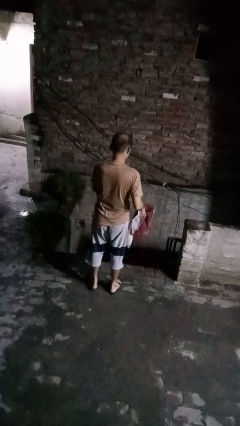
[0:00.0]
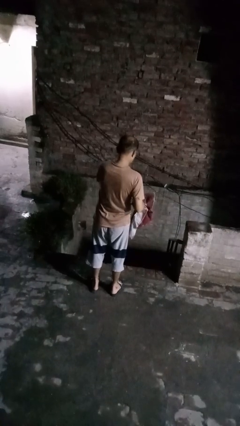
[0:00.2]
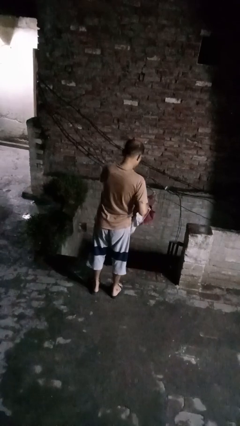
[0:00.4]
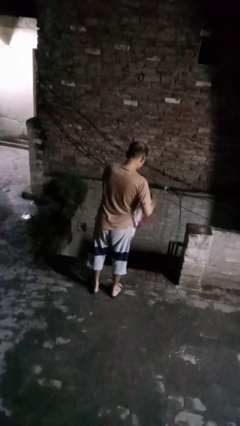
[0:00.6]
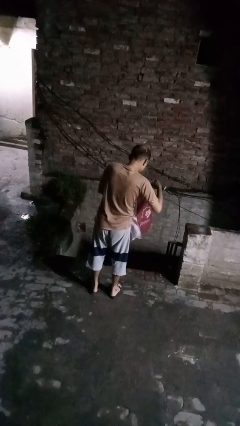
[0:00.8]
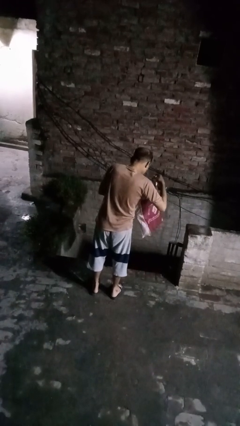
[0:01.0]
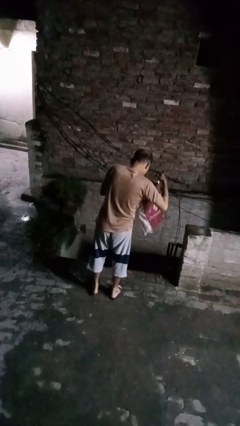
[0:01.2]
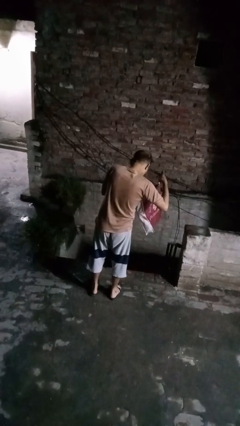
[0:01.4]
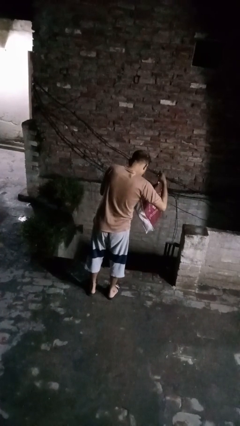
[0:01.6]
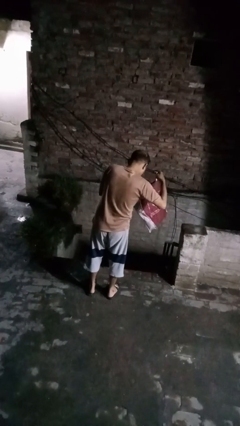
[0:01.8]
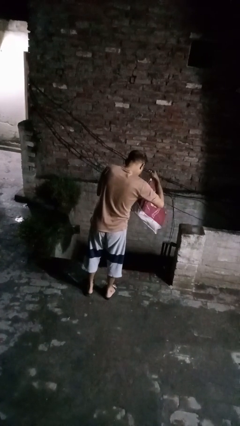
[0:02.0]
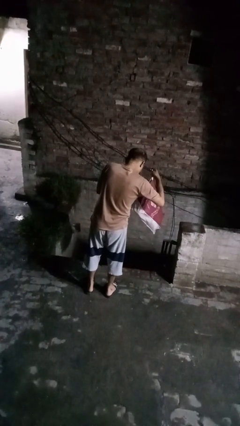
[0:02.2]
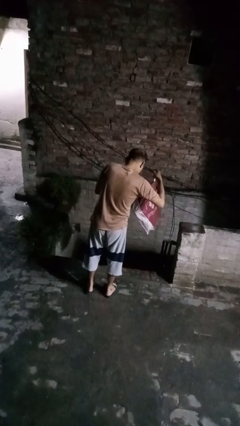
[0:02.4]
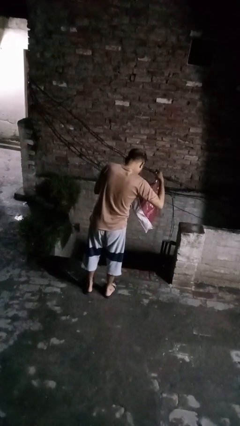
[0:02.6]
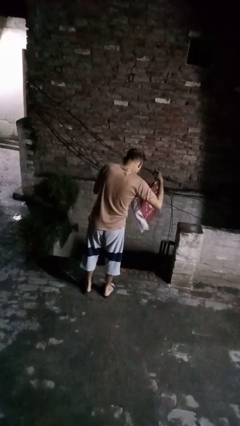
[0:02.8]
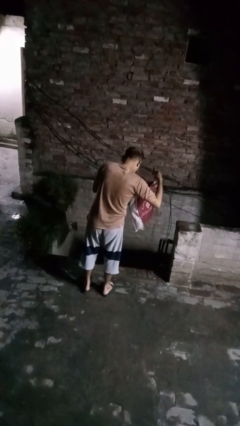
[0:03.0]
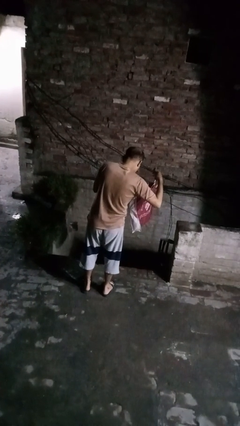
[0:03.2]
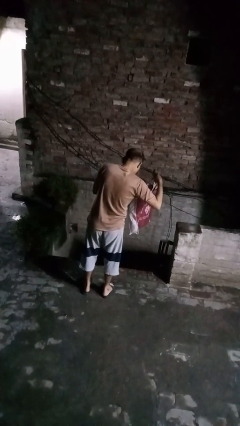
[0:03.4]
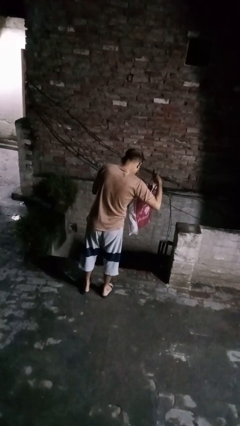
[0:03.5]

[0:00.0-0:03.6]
person searches in bag

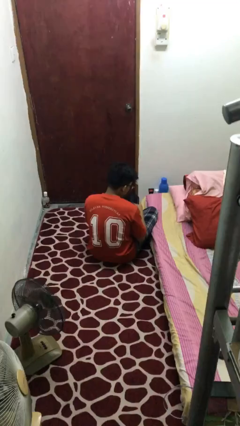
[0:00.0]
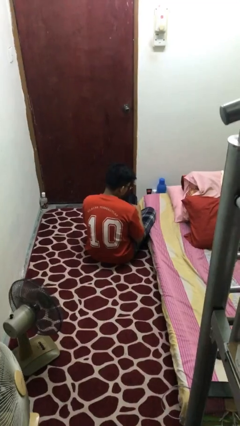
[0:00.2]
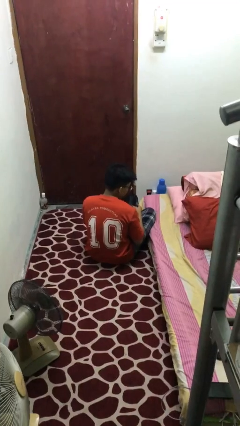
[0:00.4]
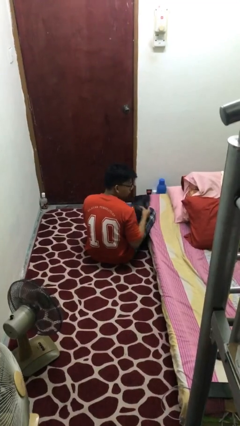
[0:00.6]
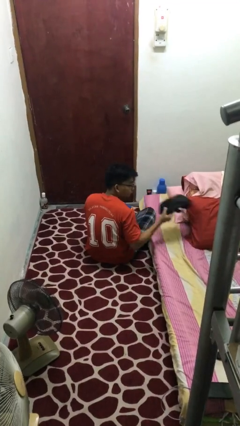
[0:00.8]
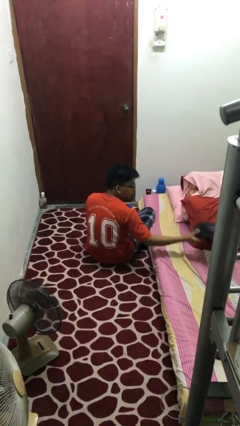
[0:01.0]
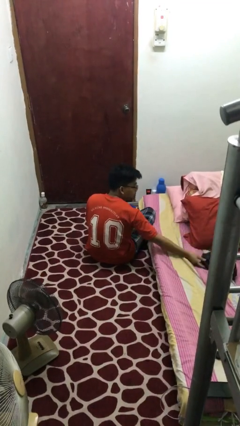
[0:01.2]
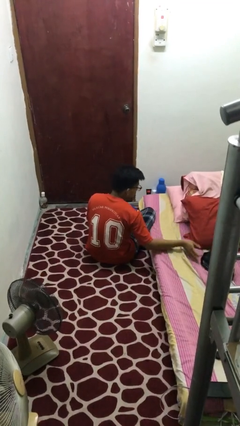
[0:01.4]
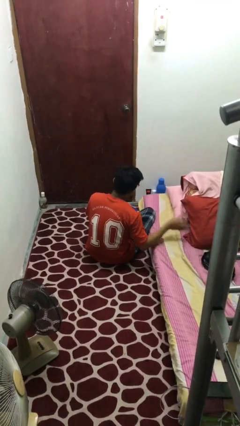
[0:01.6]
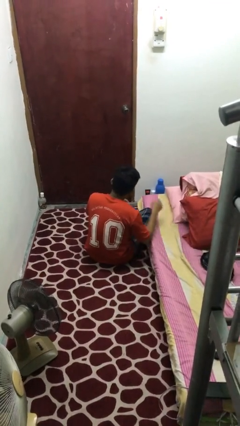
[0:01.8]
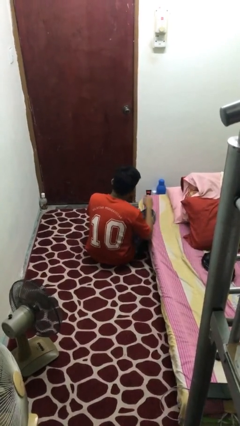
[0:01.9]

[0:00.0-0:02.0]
person puts down object on bed

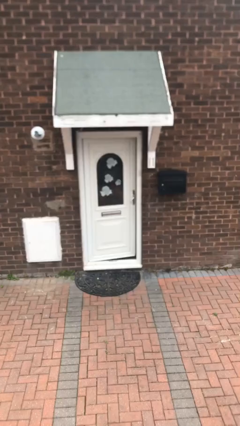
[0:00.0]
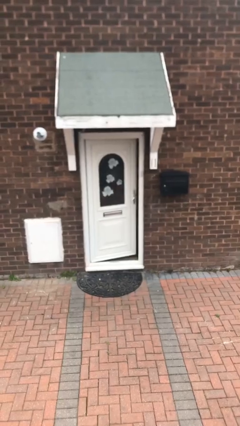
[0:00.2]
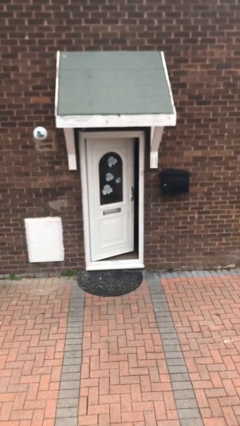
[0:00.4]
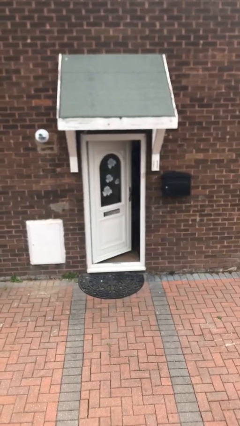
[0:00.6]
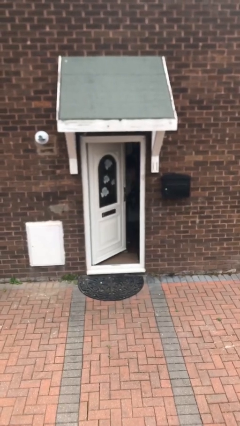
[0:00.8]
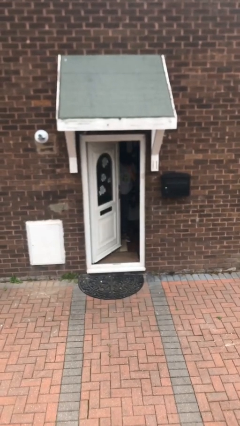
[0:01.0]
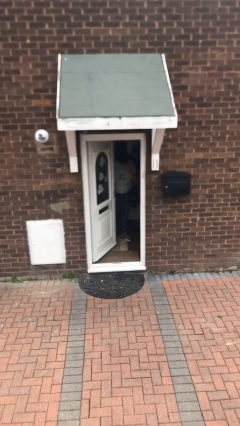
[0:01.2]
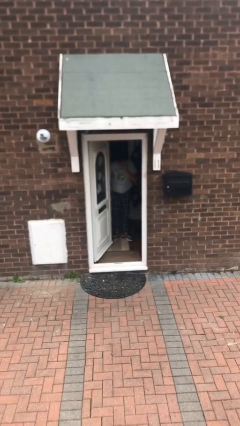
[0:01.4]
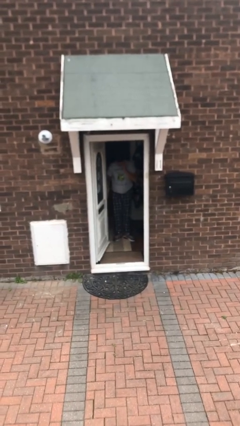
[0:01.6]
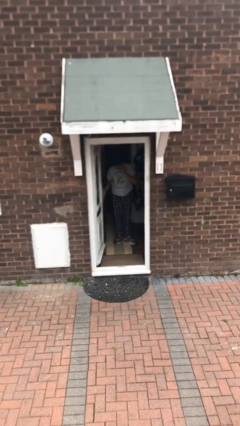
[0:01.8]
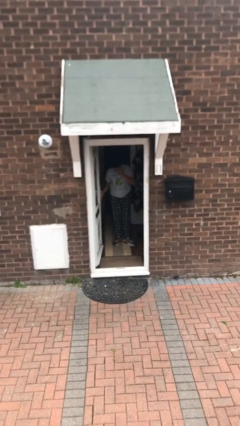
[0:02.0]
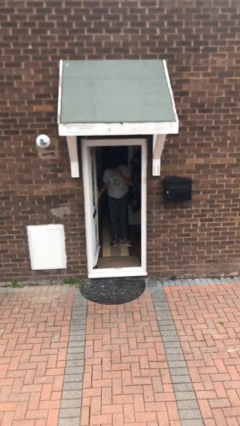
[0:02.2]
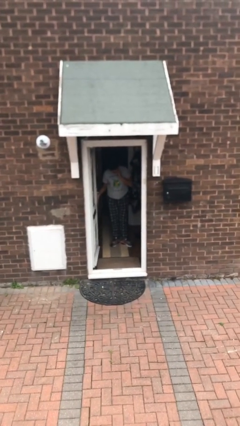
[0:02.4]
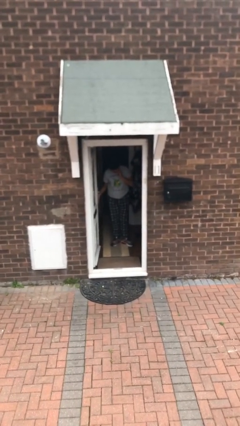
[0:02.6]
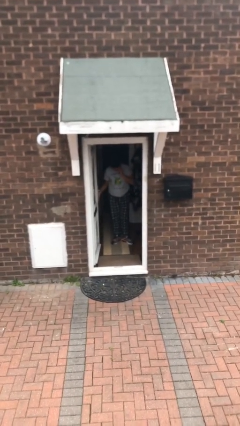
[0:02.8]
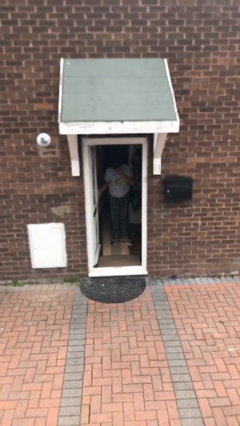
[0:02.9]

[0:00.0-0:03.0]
person opens facility door

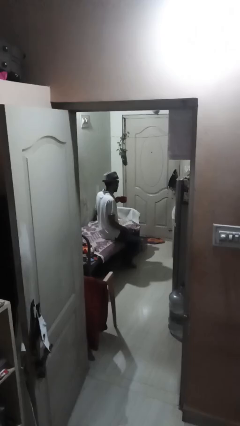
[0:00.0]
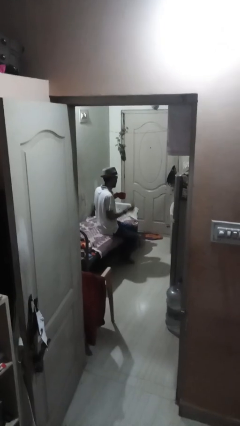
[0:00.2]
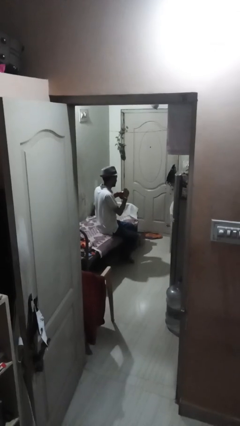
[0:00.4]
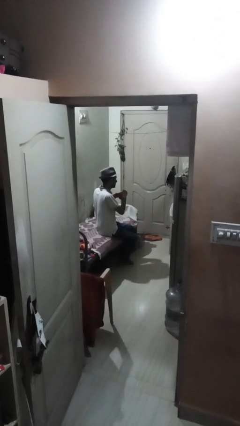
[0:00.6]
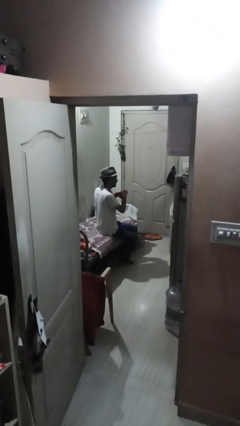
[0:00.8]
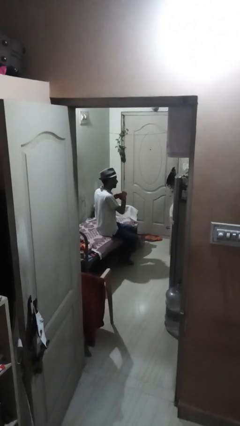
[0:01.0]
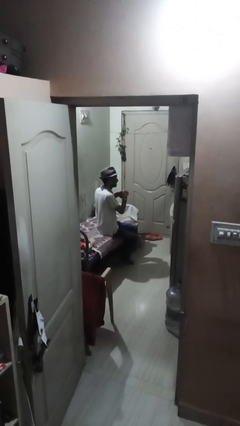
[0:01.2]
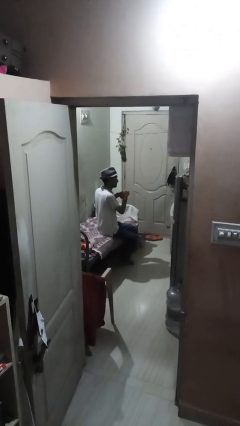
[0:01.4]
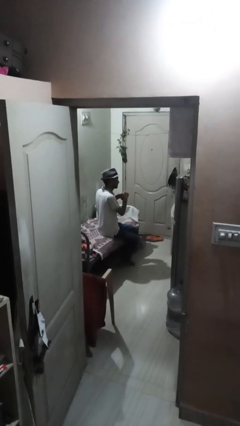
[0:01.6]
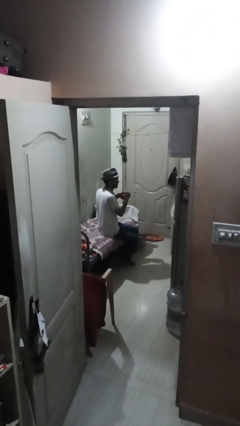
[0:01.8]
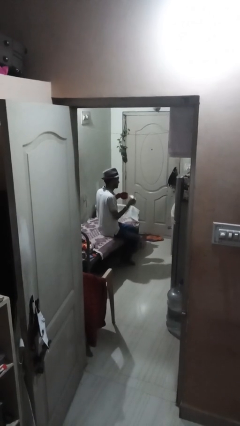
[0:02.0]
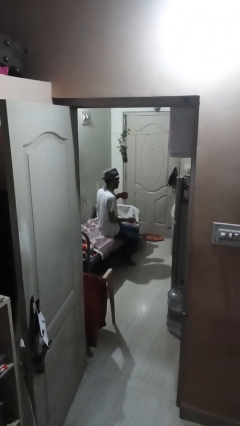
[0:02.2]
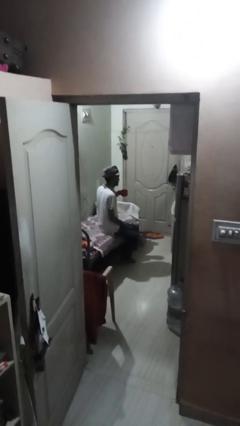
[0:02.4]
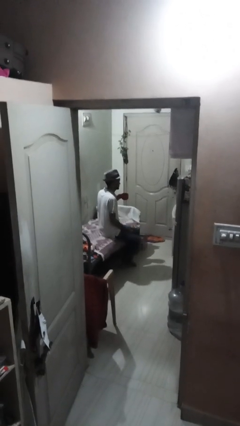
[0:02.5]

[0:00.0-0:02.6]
person stirs mug

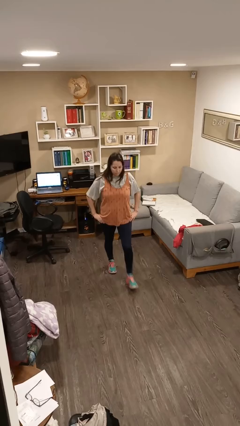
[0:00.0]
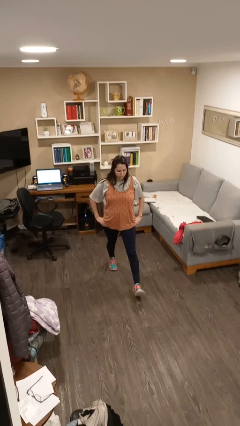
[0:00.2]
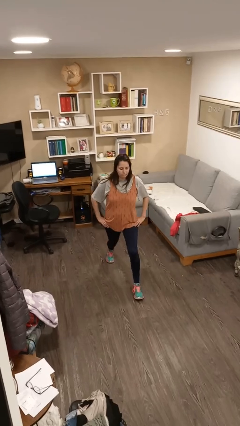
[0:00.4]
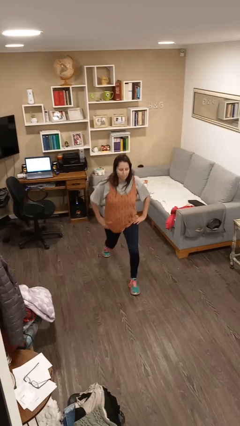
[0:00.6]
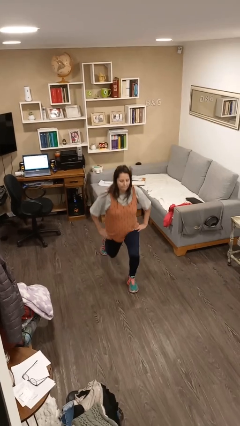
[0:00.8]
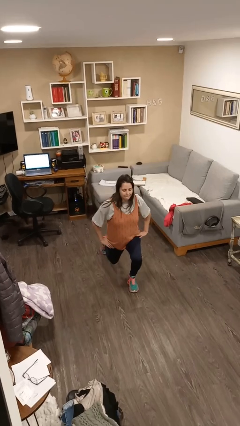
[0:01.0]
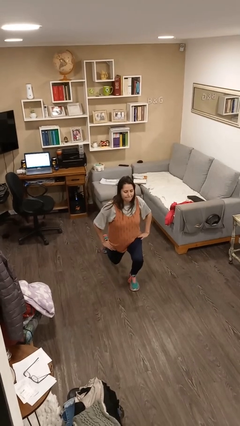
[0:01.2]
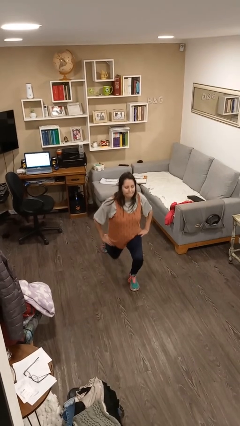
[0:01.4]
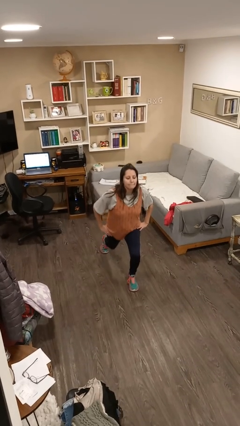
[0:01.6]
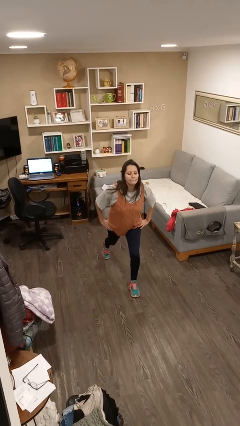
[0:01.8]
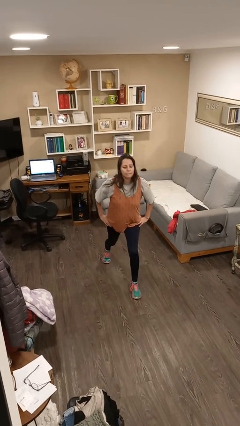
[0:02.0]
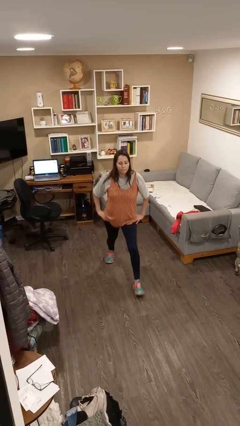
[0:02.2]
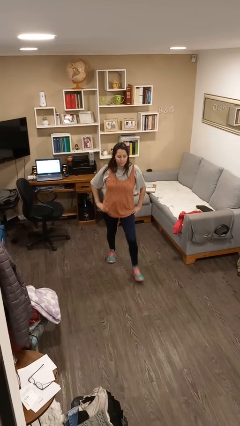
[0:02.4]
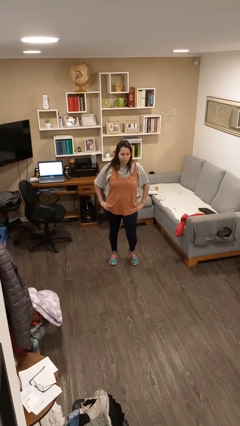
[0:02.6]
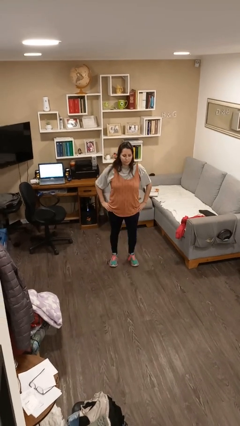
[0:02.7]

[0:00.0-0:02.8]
person exercises with lunges

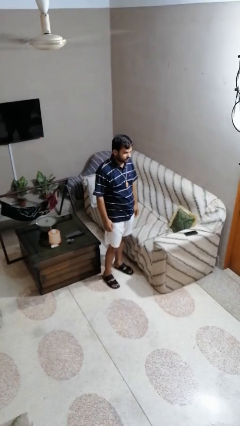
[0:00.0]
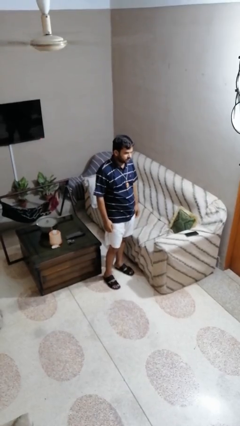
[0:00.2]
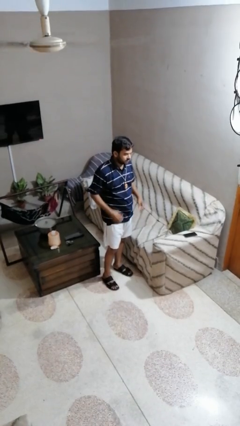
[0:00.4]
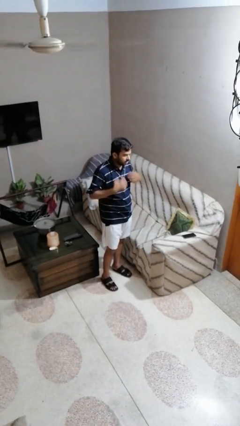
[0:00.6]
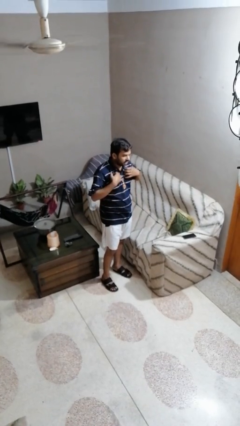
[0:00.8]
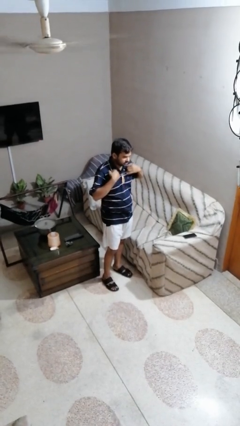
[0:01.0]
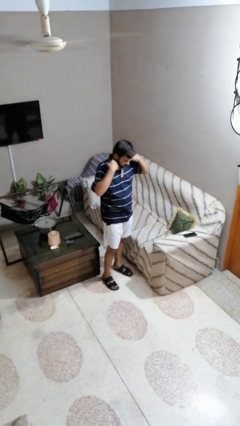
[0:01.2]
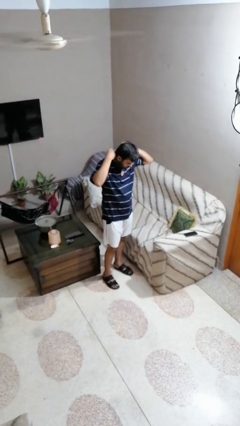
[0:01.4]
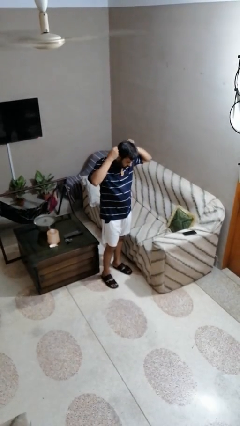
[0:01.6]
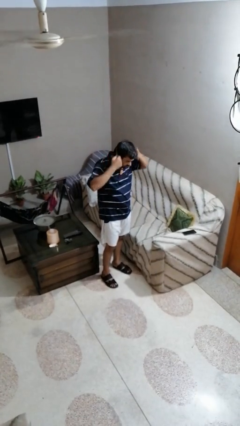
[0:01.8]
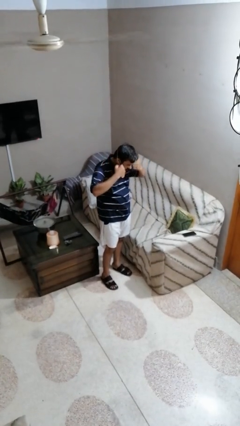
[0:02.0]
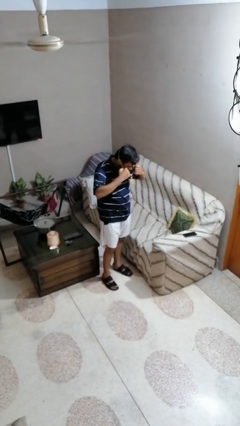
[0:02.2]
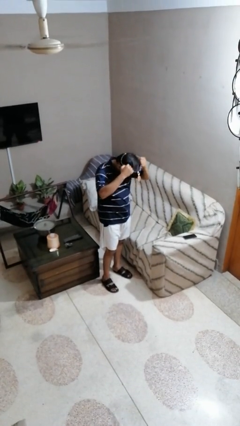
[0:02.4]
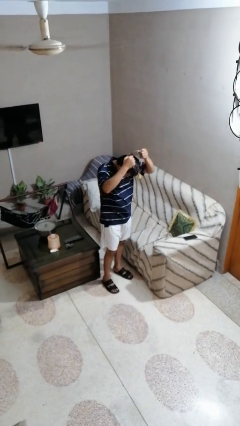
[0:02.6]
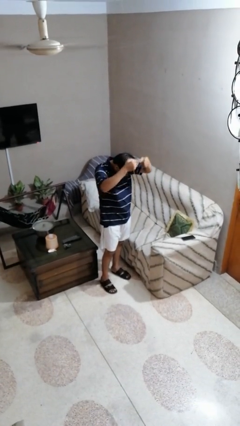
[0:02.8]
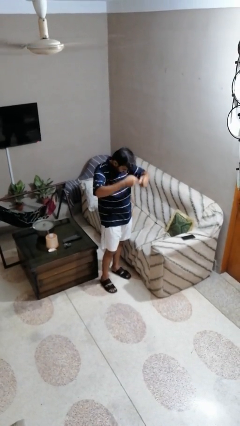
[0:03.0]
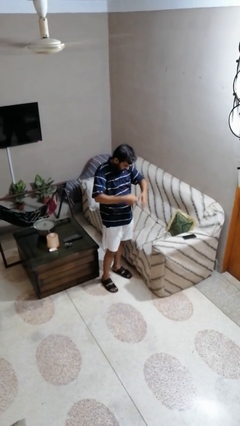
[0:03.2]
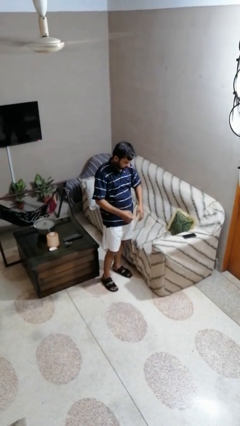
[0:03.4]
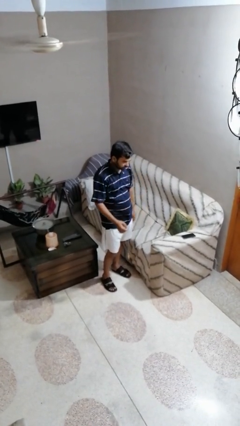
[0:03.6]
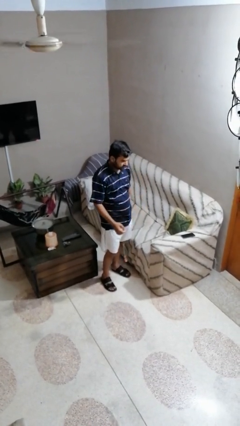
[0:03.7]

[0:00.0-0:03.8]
person takes off necklace
